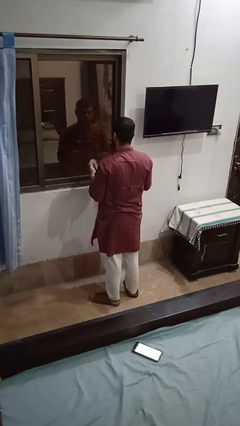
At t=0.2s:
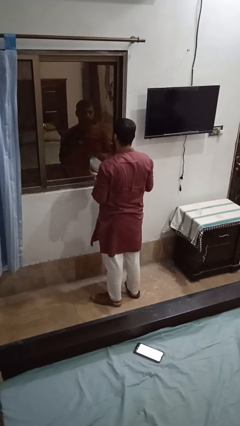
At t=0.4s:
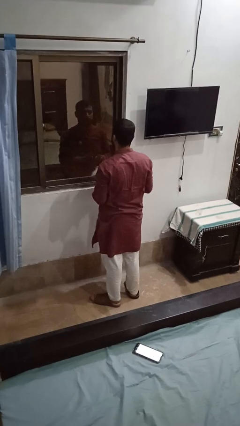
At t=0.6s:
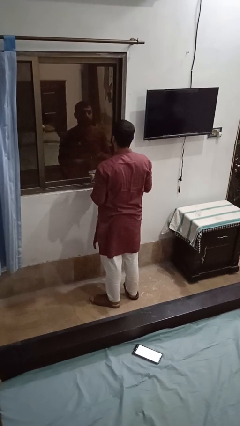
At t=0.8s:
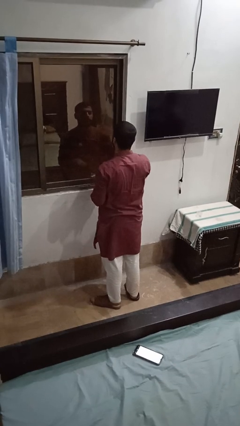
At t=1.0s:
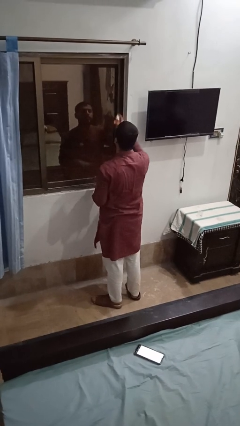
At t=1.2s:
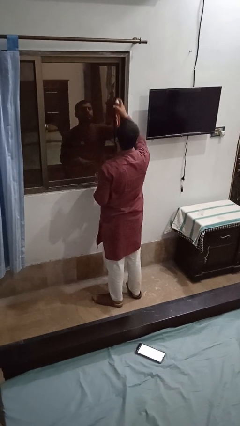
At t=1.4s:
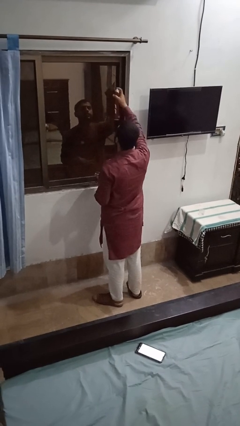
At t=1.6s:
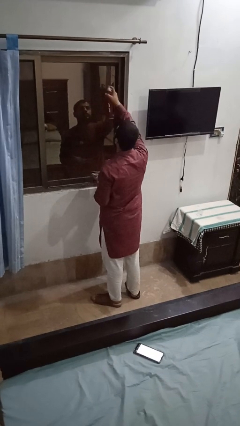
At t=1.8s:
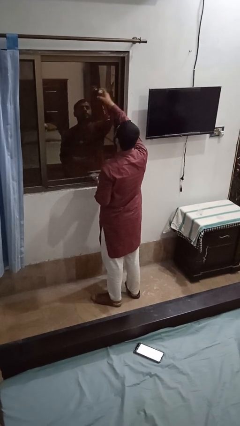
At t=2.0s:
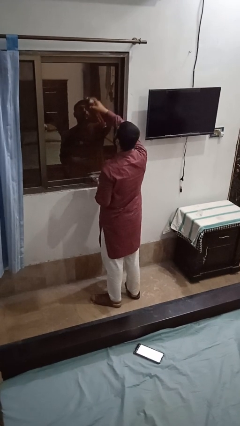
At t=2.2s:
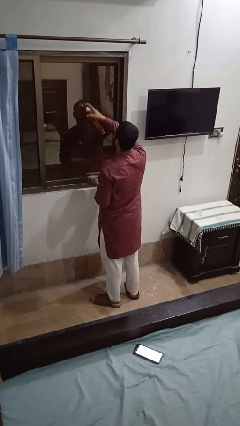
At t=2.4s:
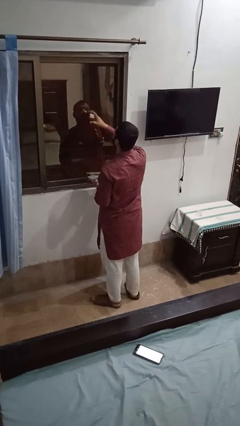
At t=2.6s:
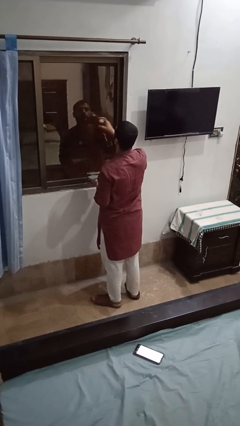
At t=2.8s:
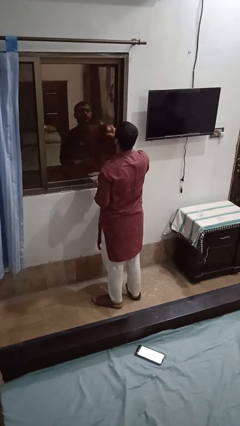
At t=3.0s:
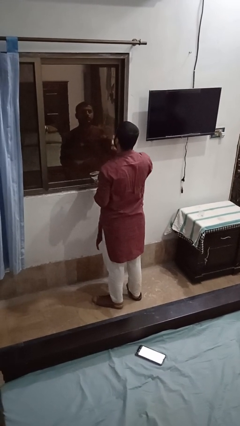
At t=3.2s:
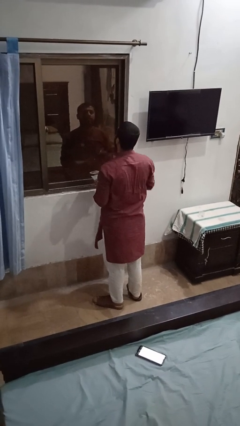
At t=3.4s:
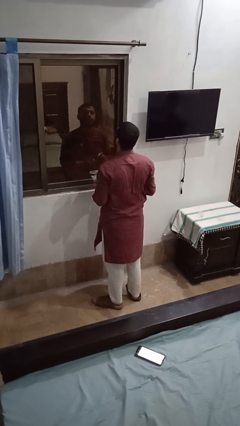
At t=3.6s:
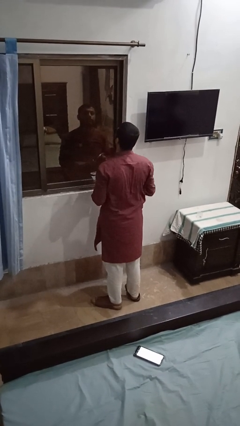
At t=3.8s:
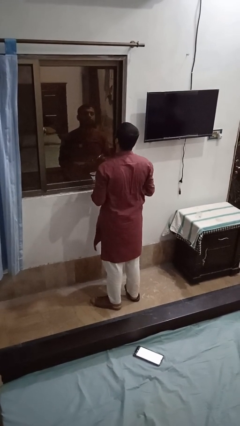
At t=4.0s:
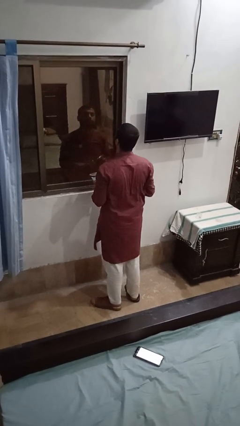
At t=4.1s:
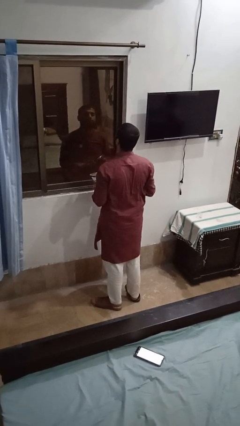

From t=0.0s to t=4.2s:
person sprays from bottle

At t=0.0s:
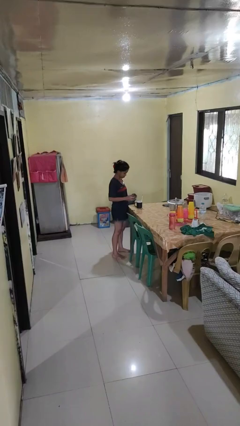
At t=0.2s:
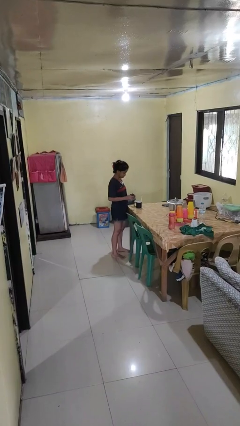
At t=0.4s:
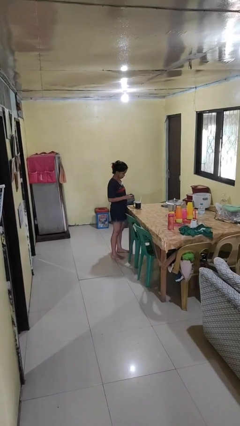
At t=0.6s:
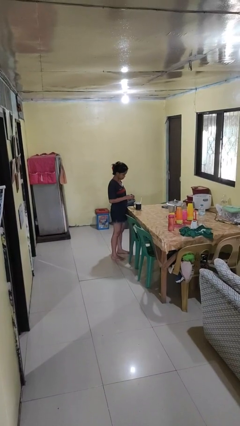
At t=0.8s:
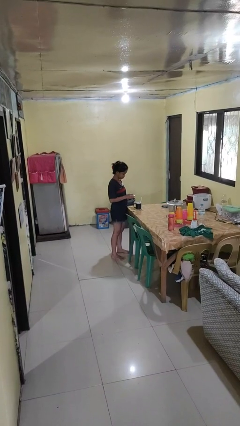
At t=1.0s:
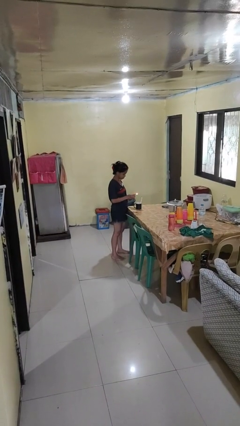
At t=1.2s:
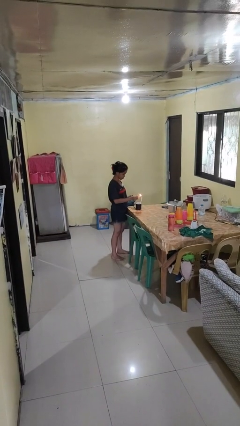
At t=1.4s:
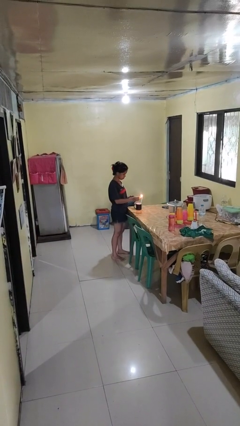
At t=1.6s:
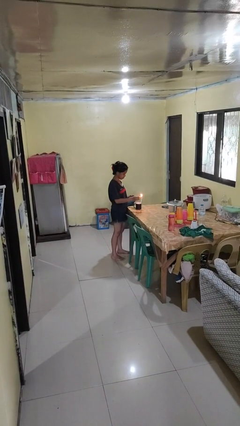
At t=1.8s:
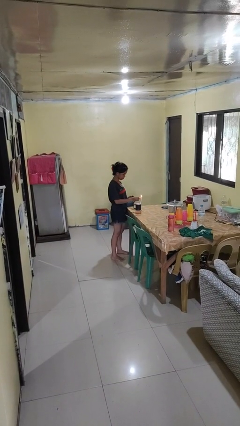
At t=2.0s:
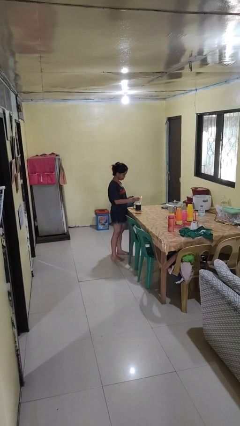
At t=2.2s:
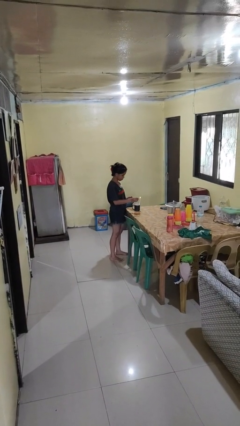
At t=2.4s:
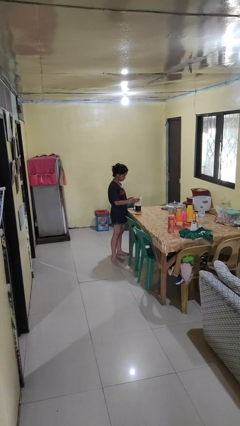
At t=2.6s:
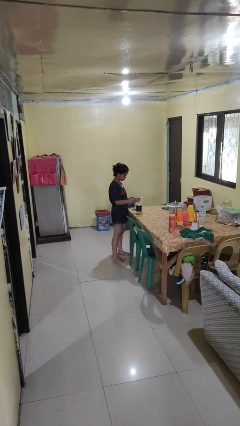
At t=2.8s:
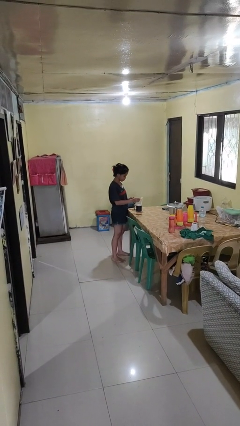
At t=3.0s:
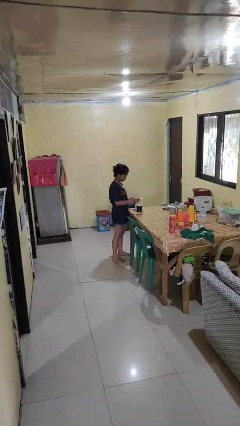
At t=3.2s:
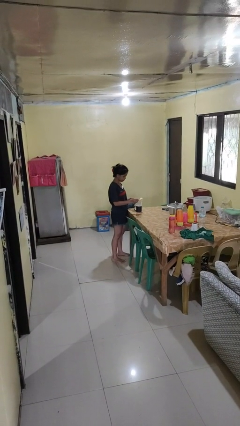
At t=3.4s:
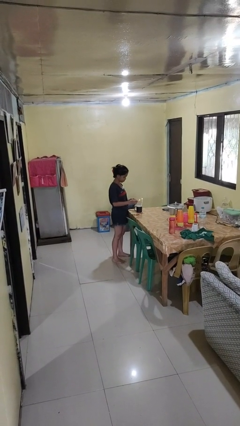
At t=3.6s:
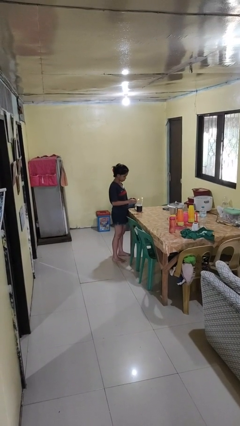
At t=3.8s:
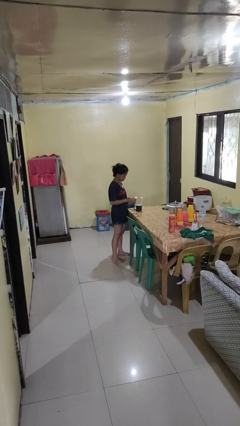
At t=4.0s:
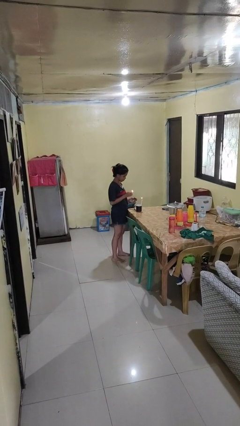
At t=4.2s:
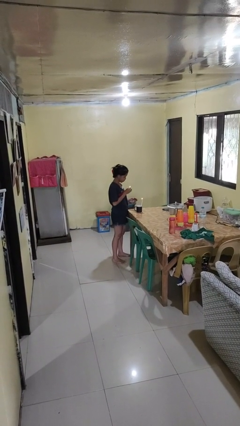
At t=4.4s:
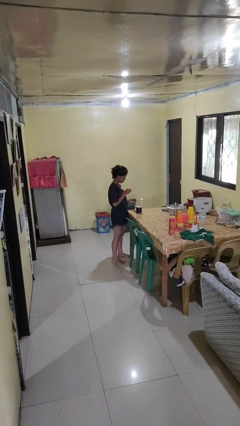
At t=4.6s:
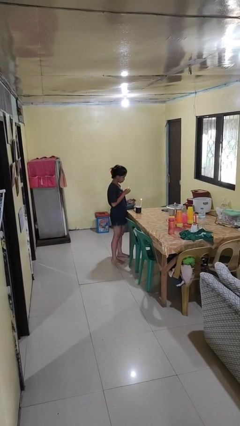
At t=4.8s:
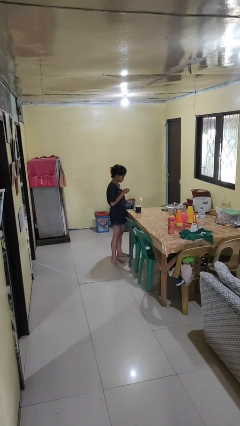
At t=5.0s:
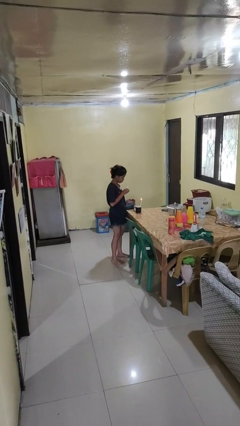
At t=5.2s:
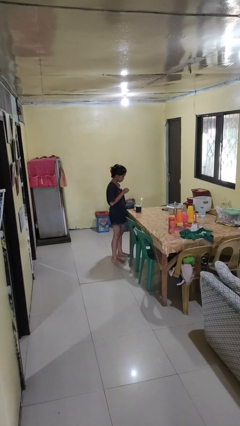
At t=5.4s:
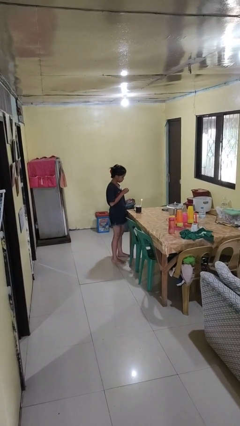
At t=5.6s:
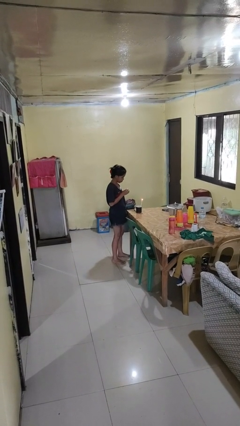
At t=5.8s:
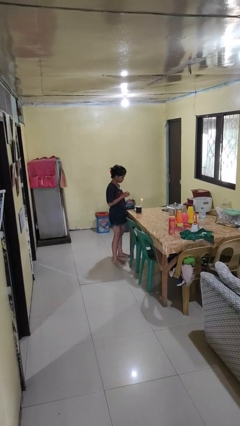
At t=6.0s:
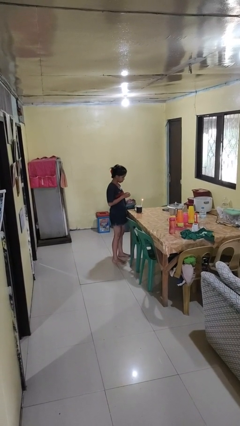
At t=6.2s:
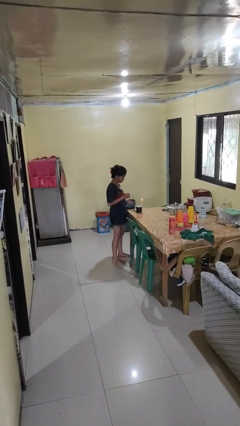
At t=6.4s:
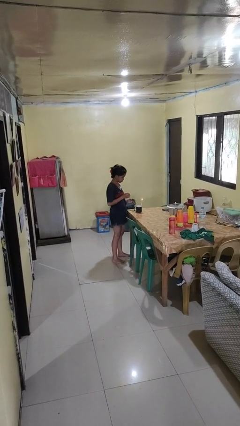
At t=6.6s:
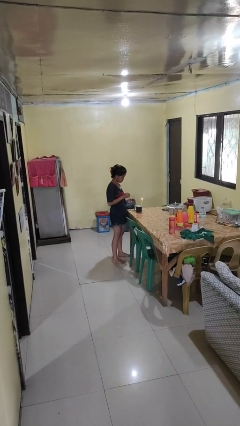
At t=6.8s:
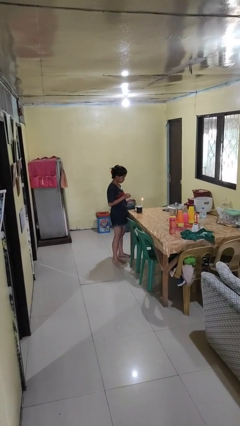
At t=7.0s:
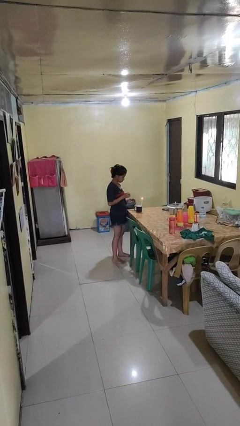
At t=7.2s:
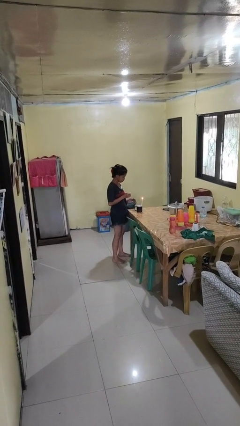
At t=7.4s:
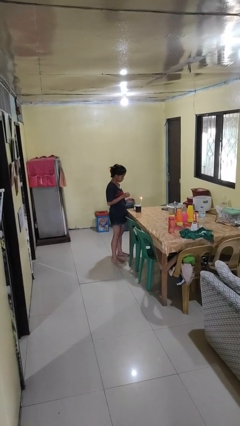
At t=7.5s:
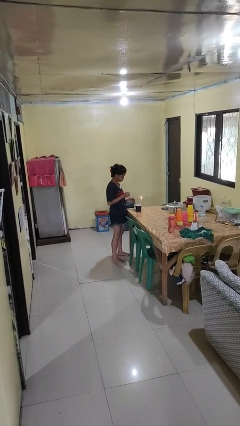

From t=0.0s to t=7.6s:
person lights candle

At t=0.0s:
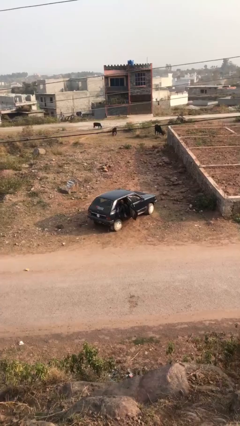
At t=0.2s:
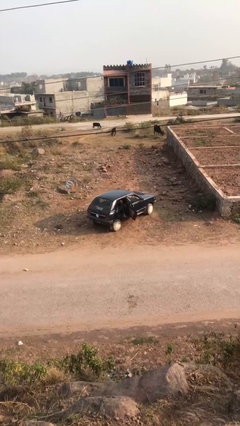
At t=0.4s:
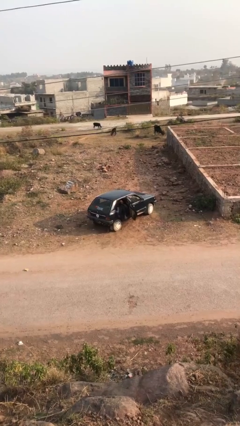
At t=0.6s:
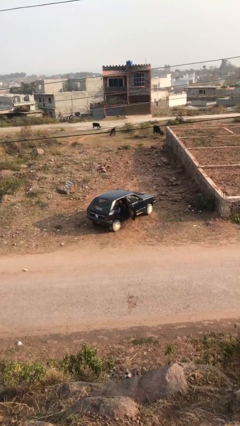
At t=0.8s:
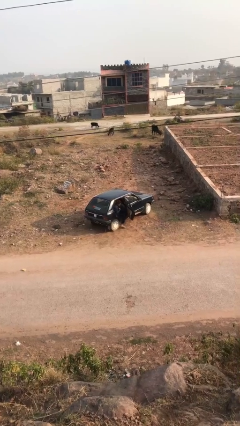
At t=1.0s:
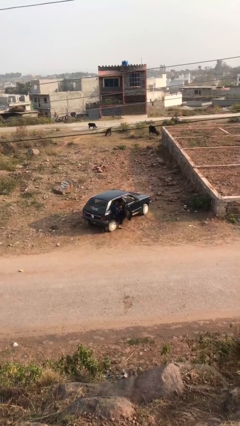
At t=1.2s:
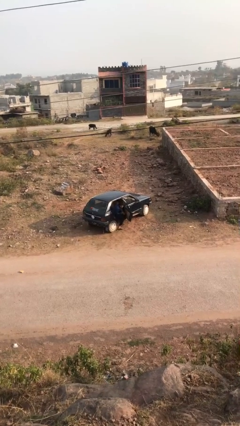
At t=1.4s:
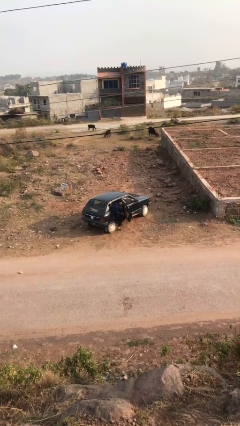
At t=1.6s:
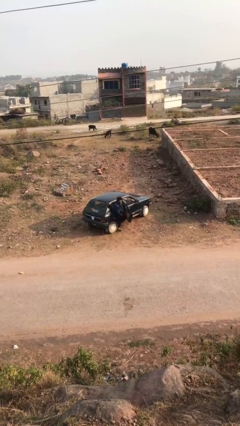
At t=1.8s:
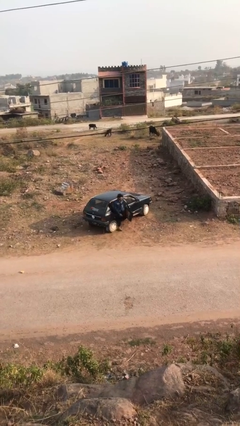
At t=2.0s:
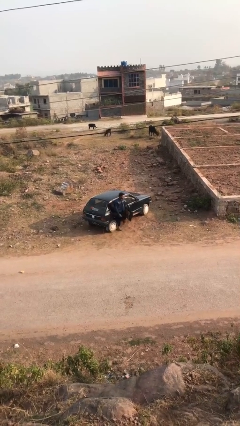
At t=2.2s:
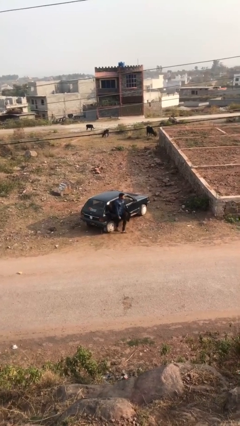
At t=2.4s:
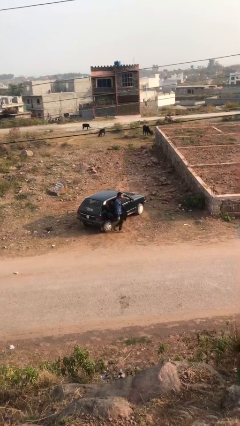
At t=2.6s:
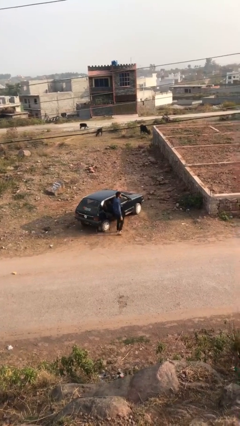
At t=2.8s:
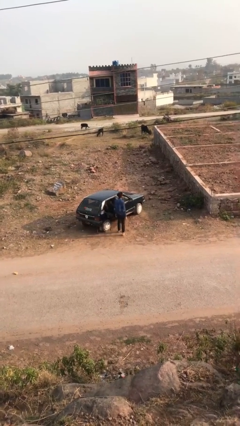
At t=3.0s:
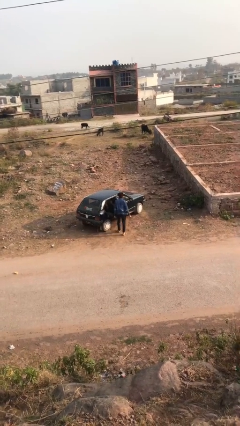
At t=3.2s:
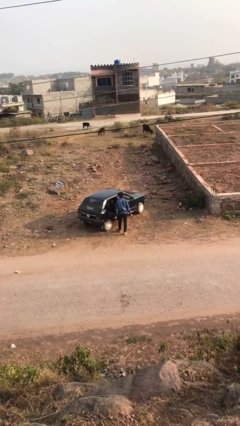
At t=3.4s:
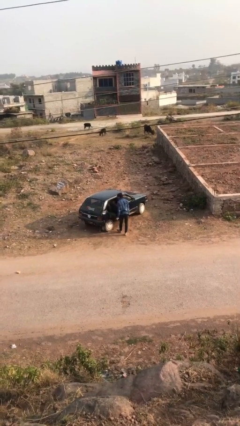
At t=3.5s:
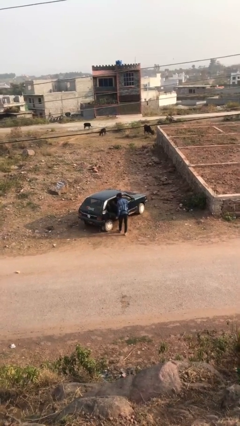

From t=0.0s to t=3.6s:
person exits car

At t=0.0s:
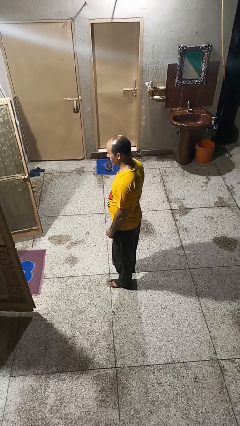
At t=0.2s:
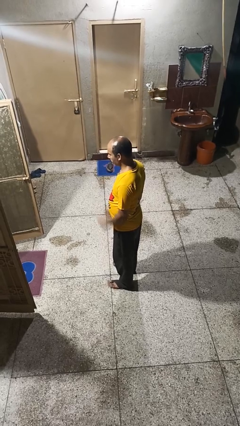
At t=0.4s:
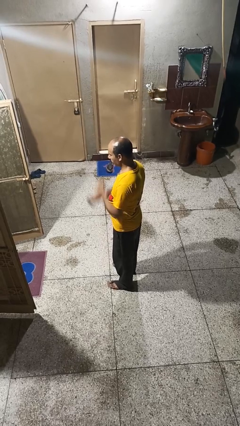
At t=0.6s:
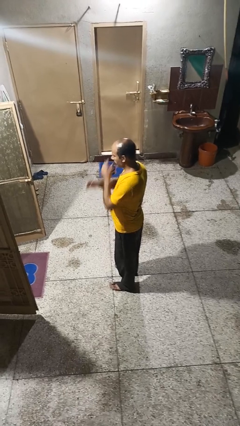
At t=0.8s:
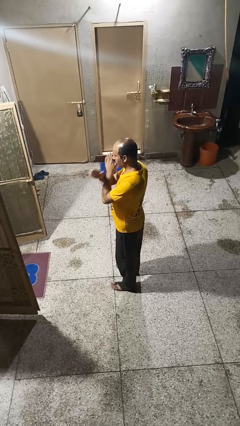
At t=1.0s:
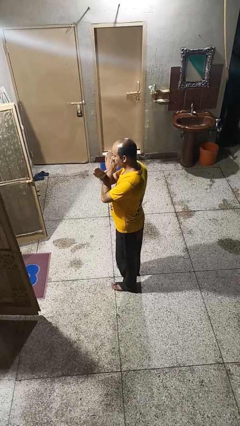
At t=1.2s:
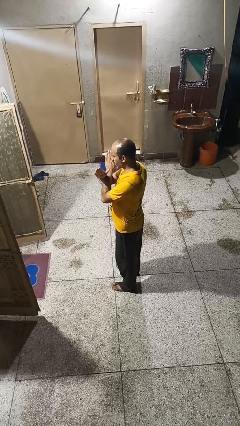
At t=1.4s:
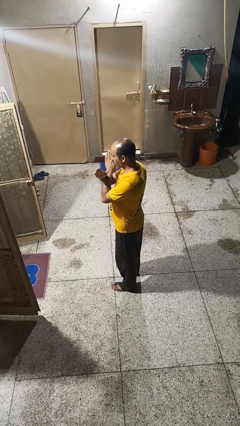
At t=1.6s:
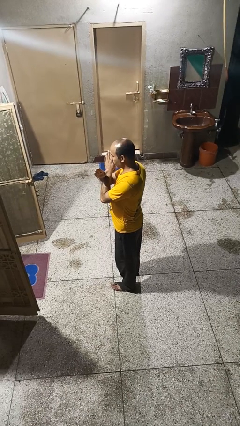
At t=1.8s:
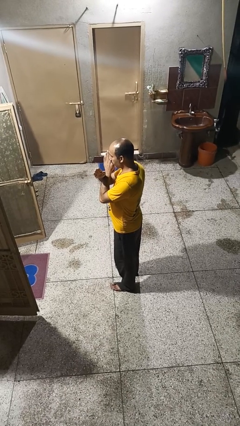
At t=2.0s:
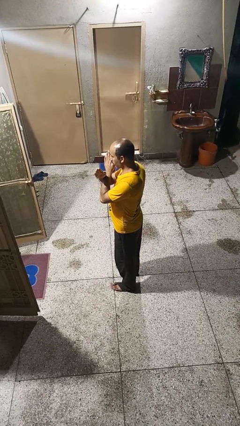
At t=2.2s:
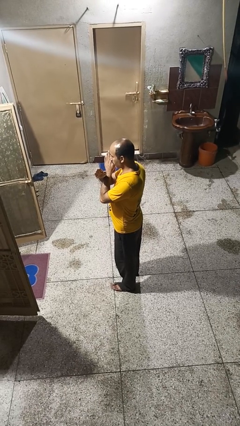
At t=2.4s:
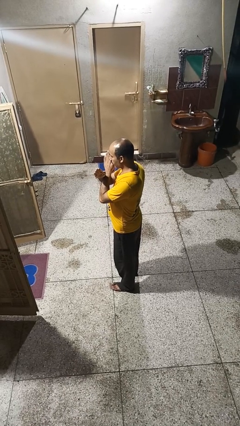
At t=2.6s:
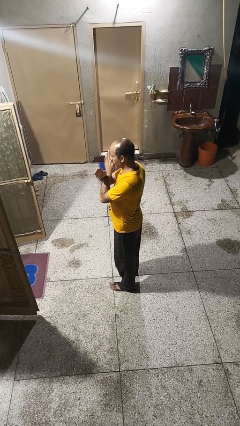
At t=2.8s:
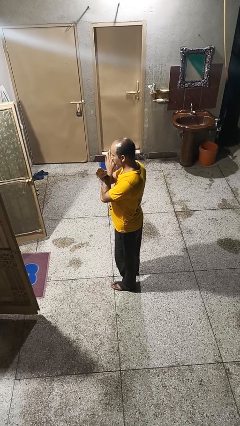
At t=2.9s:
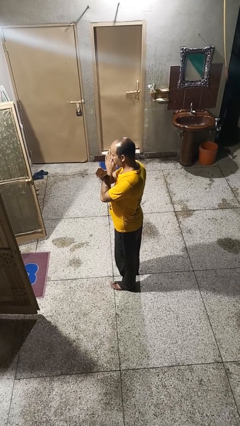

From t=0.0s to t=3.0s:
person gestures arms x
